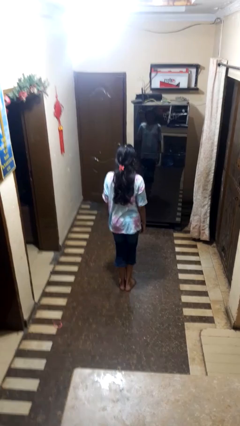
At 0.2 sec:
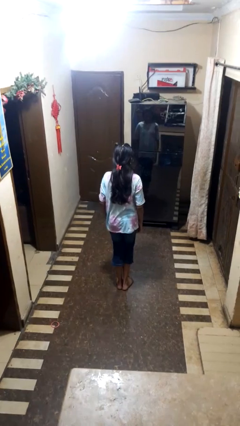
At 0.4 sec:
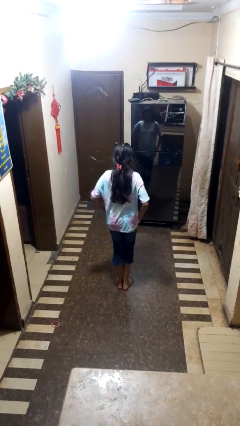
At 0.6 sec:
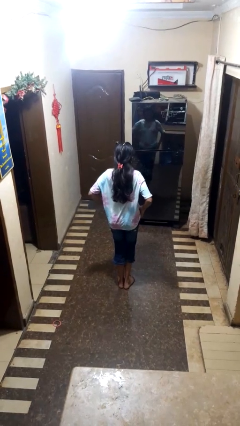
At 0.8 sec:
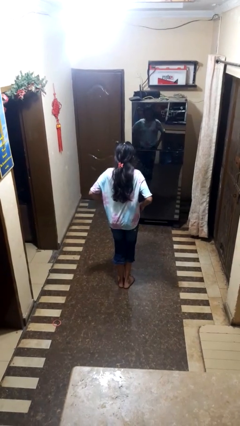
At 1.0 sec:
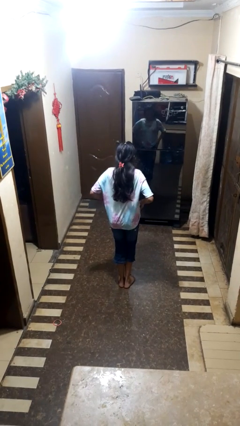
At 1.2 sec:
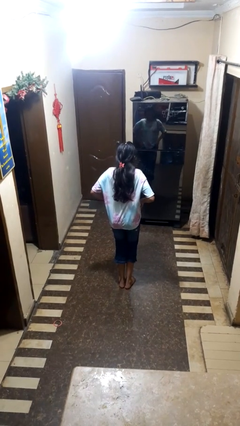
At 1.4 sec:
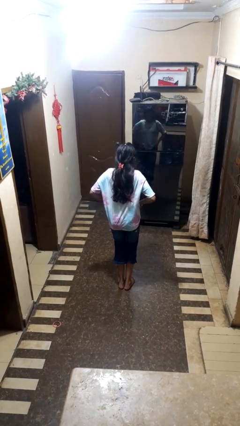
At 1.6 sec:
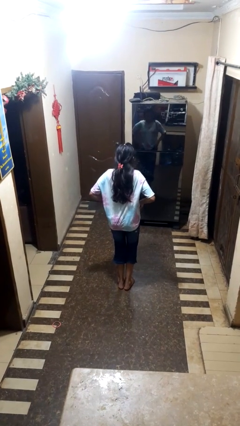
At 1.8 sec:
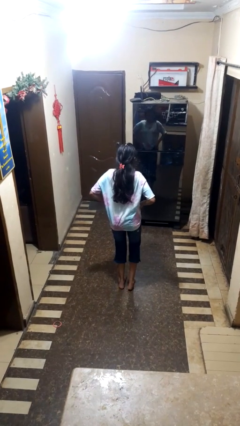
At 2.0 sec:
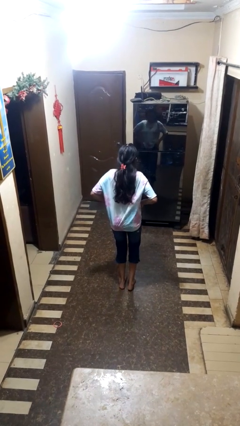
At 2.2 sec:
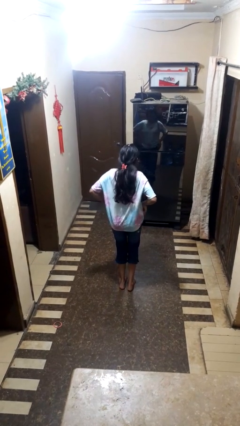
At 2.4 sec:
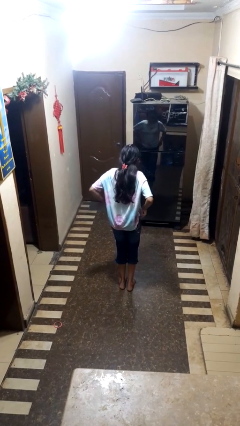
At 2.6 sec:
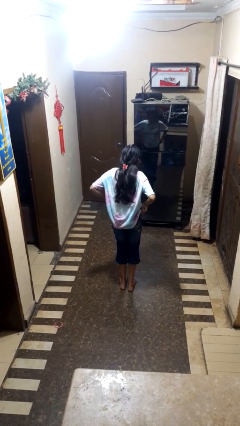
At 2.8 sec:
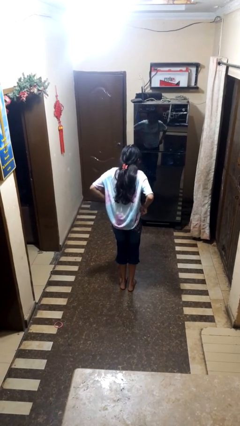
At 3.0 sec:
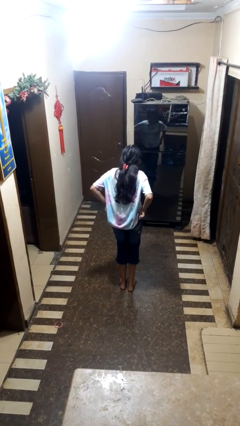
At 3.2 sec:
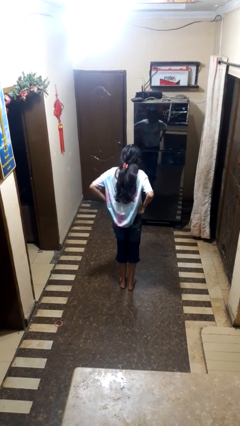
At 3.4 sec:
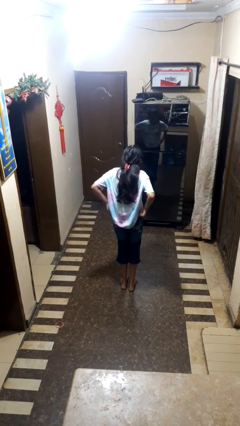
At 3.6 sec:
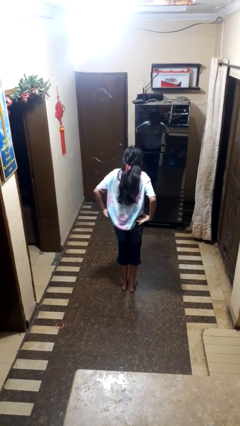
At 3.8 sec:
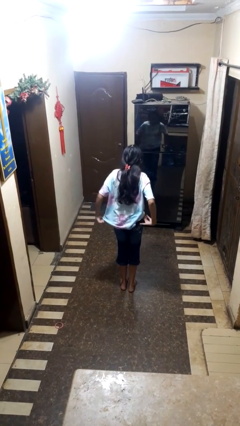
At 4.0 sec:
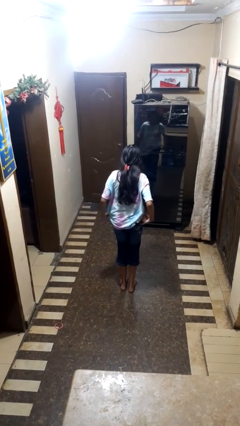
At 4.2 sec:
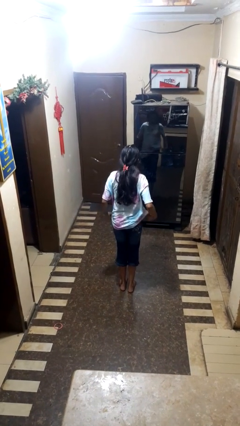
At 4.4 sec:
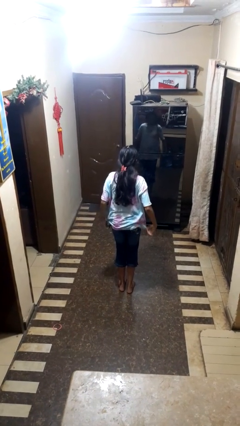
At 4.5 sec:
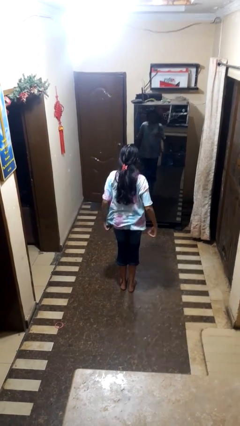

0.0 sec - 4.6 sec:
person hikes up pants

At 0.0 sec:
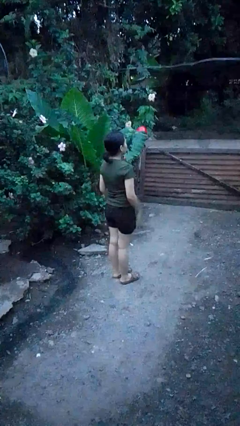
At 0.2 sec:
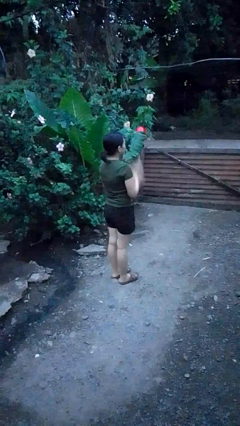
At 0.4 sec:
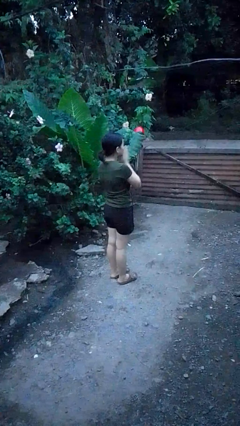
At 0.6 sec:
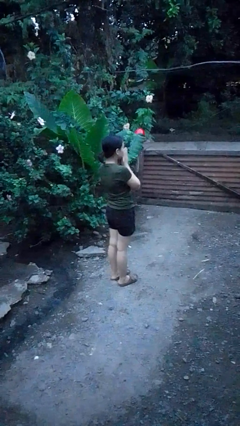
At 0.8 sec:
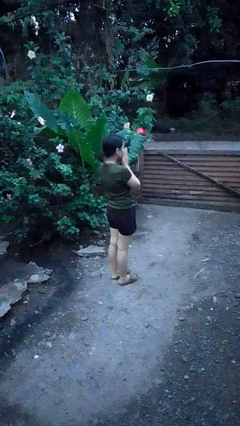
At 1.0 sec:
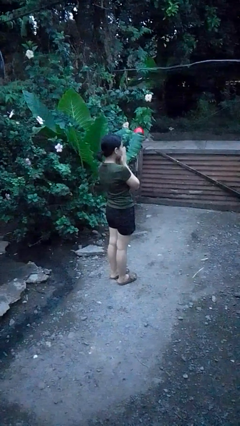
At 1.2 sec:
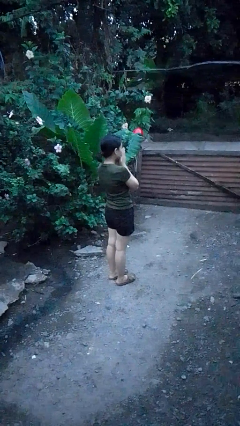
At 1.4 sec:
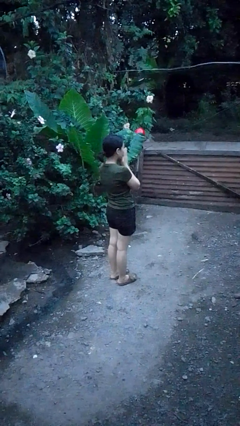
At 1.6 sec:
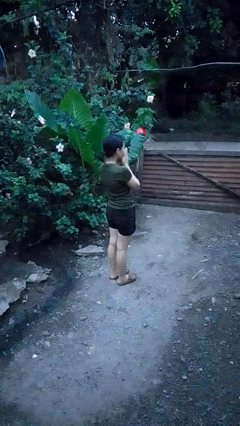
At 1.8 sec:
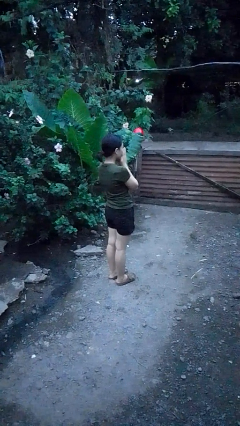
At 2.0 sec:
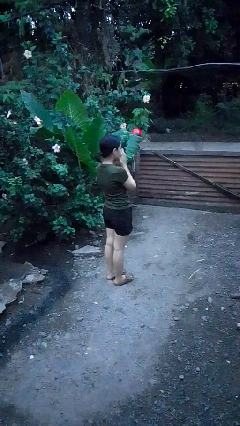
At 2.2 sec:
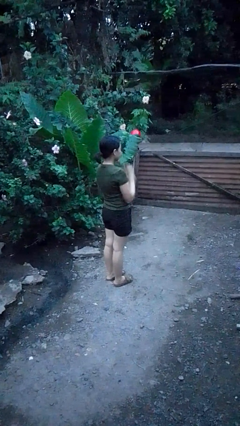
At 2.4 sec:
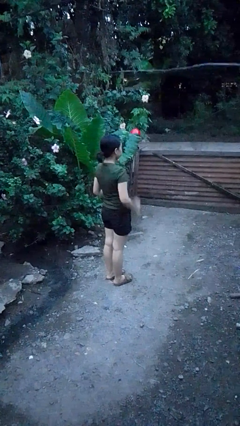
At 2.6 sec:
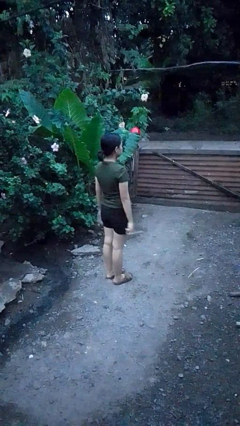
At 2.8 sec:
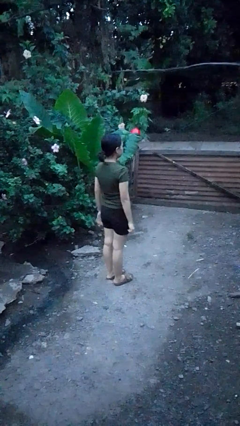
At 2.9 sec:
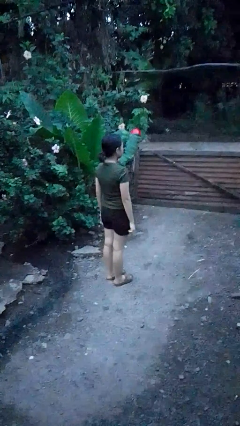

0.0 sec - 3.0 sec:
person blows into hands

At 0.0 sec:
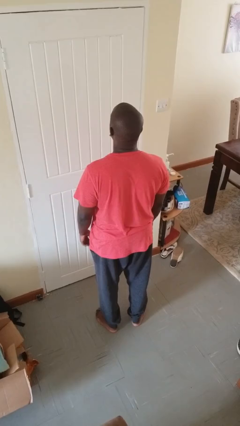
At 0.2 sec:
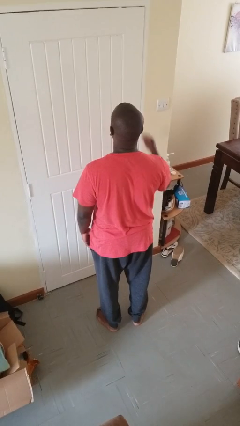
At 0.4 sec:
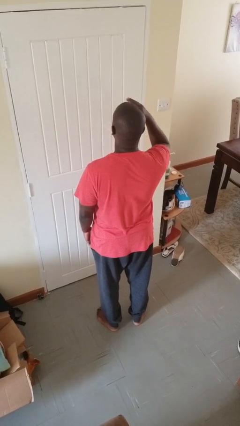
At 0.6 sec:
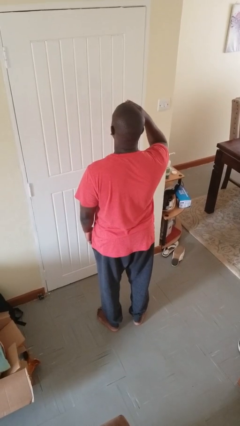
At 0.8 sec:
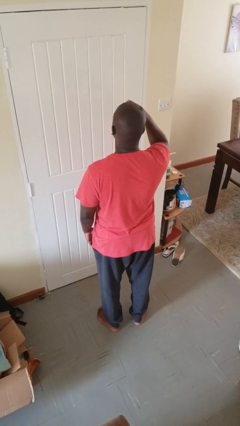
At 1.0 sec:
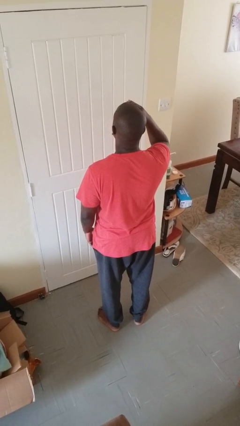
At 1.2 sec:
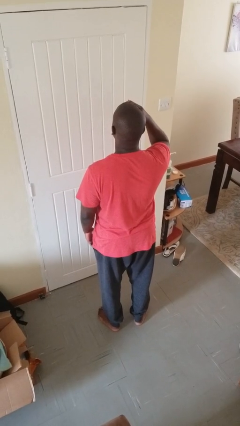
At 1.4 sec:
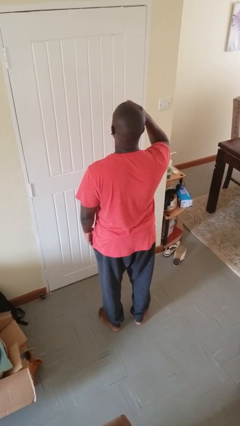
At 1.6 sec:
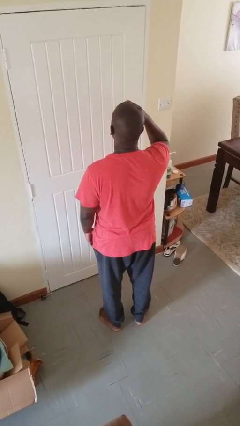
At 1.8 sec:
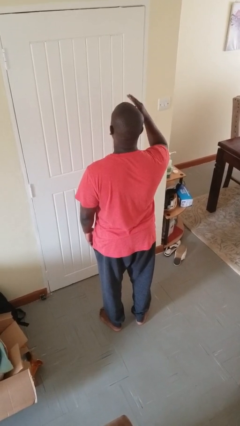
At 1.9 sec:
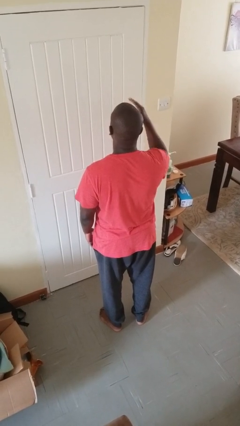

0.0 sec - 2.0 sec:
person salutes

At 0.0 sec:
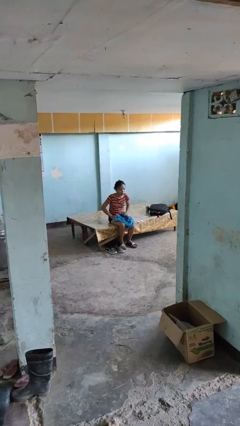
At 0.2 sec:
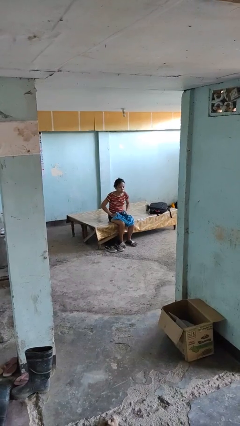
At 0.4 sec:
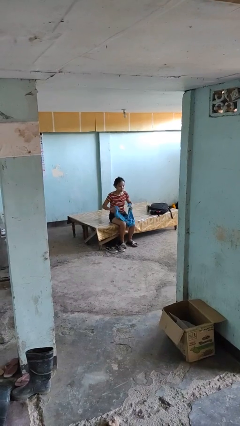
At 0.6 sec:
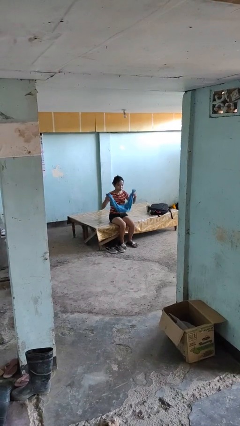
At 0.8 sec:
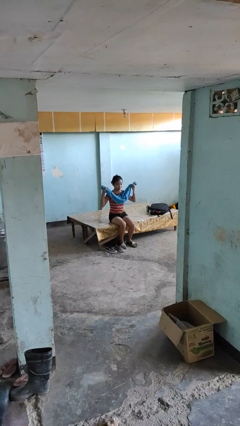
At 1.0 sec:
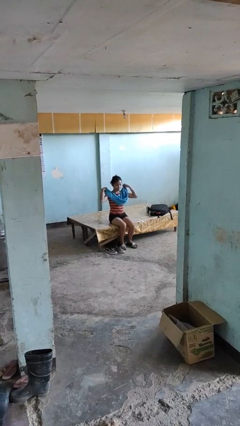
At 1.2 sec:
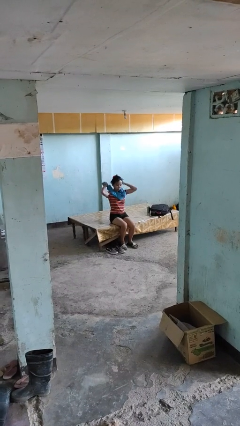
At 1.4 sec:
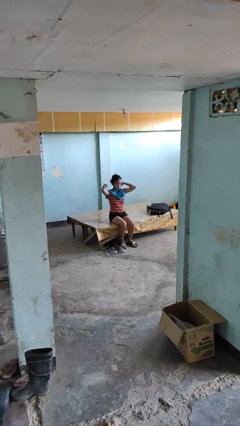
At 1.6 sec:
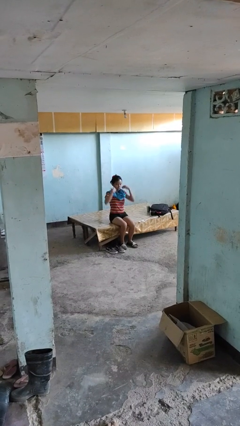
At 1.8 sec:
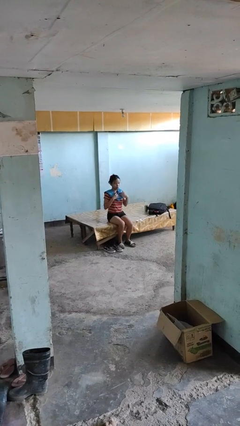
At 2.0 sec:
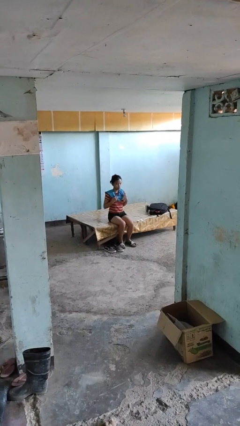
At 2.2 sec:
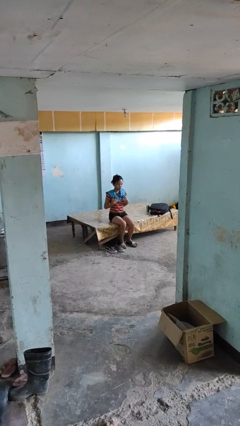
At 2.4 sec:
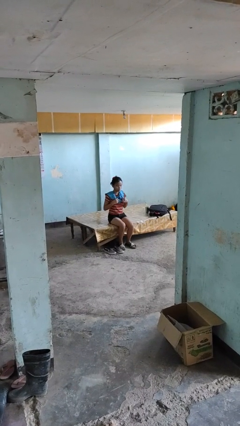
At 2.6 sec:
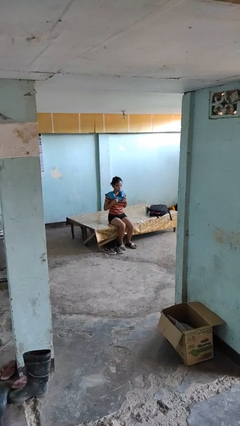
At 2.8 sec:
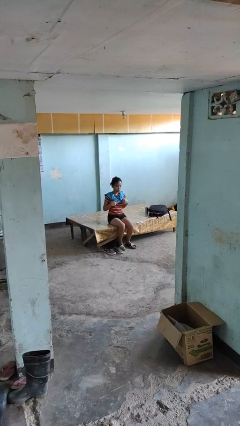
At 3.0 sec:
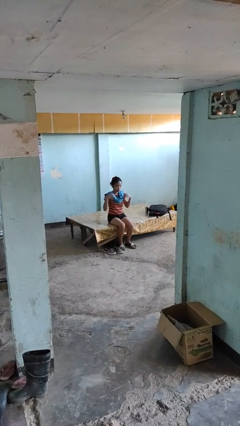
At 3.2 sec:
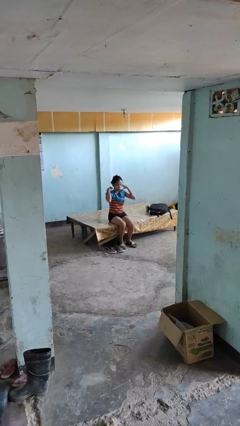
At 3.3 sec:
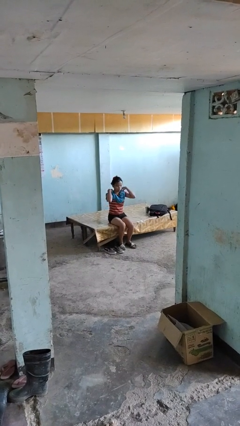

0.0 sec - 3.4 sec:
person puts on scarf

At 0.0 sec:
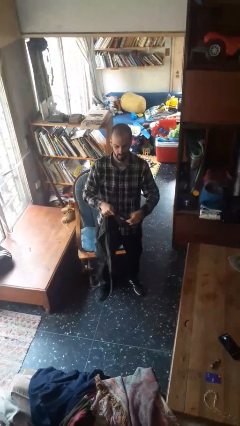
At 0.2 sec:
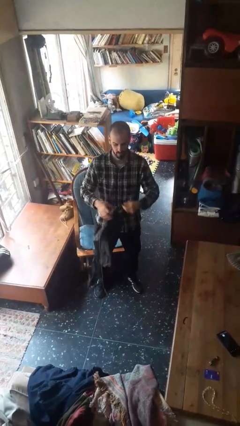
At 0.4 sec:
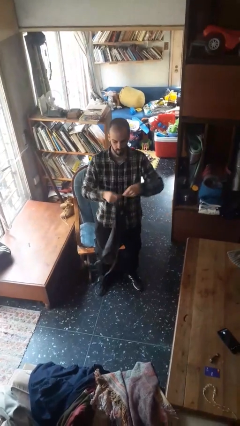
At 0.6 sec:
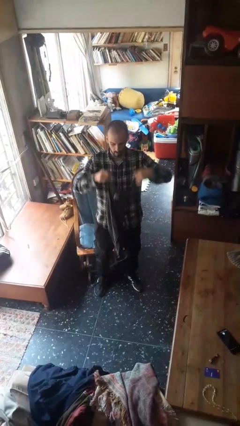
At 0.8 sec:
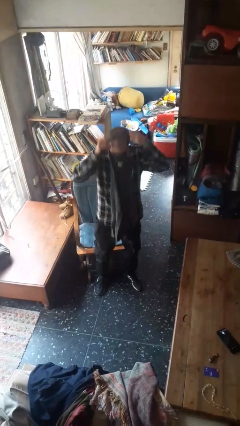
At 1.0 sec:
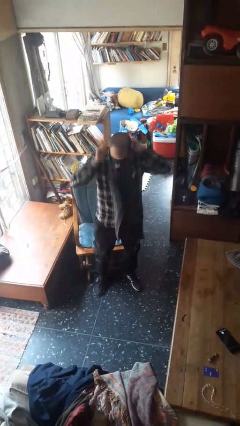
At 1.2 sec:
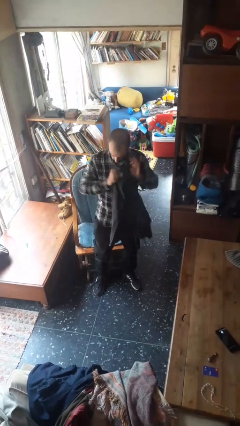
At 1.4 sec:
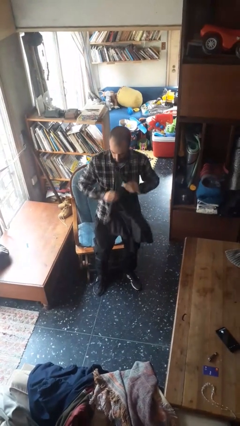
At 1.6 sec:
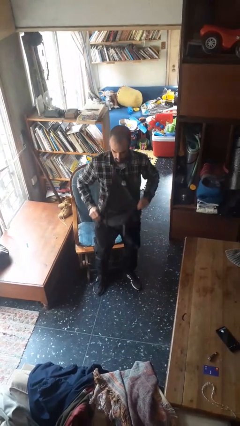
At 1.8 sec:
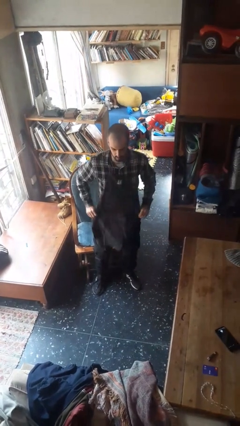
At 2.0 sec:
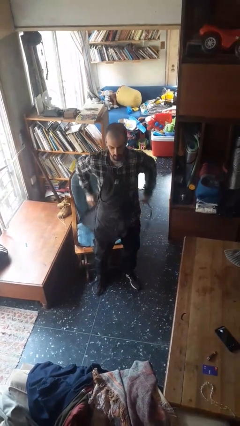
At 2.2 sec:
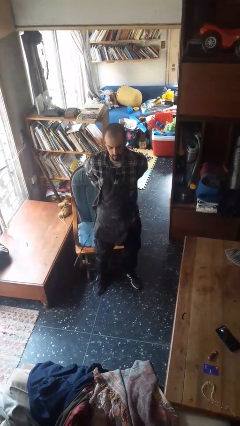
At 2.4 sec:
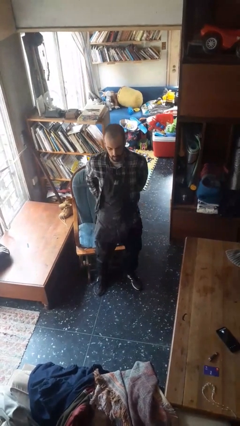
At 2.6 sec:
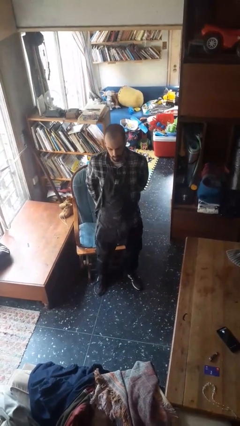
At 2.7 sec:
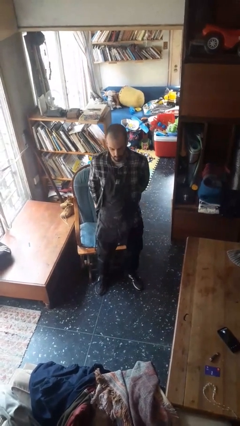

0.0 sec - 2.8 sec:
person puts on apron

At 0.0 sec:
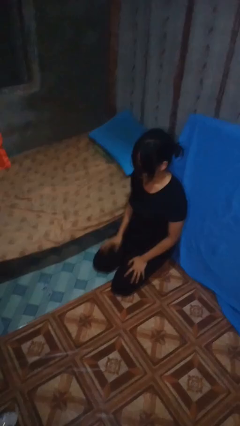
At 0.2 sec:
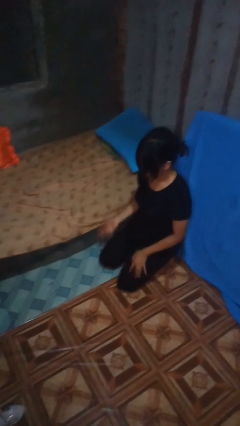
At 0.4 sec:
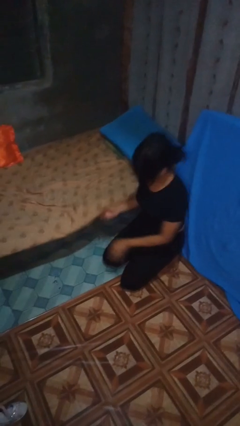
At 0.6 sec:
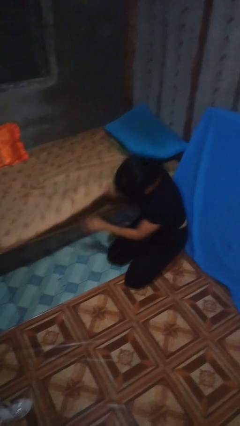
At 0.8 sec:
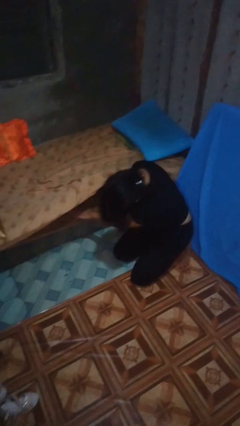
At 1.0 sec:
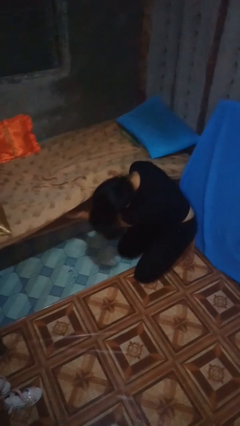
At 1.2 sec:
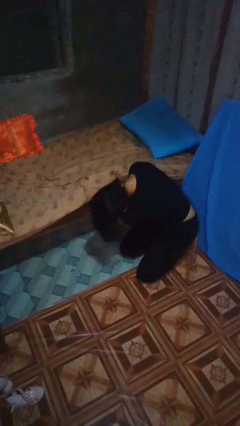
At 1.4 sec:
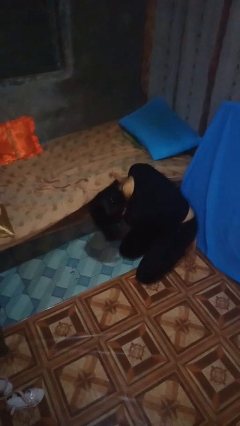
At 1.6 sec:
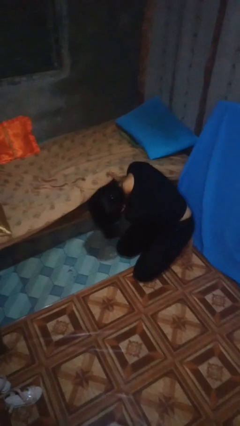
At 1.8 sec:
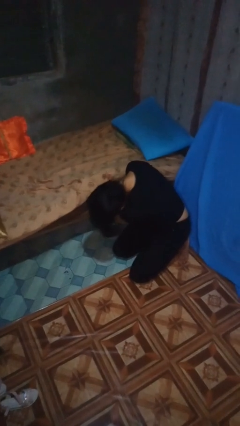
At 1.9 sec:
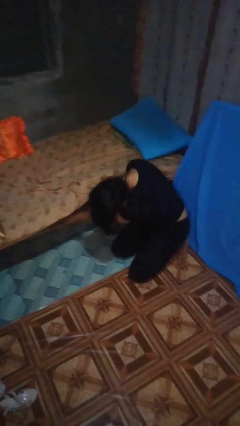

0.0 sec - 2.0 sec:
person searches under bed
